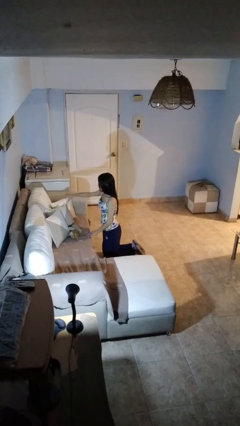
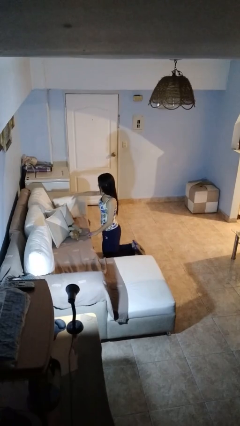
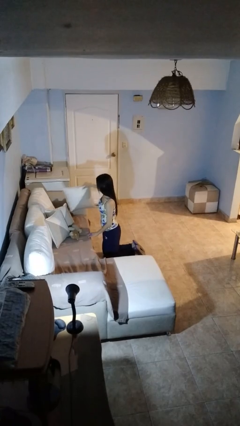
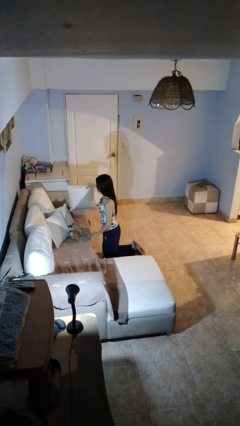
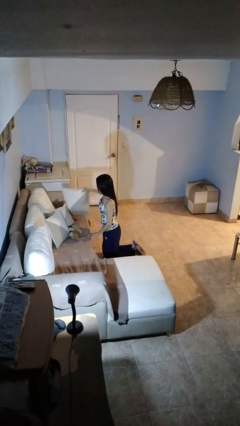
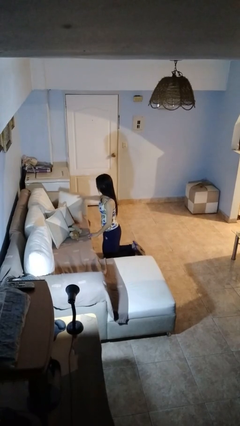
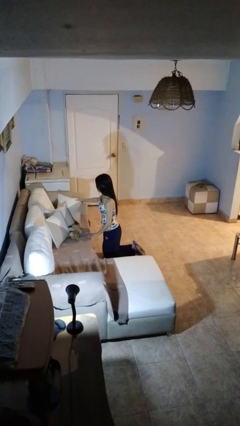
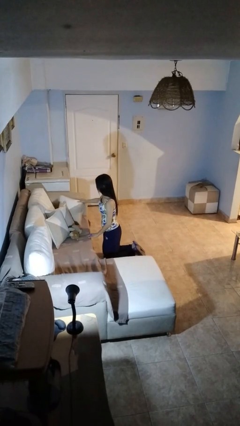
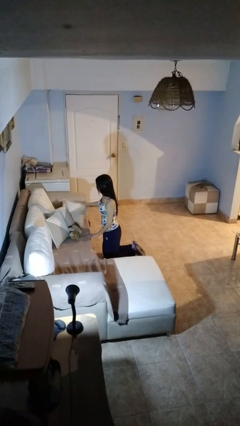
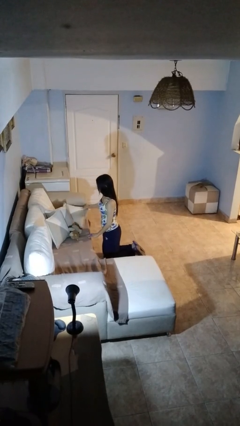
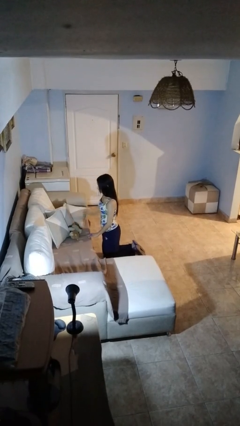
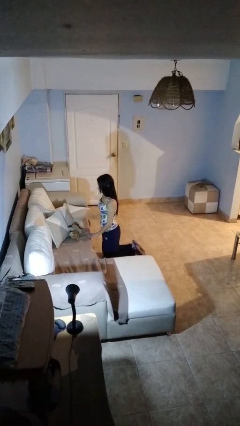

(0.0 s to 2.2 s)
person searches in couch

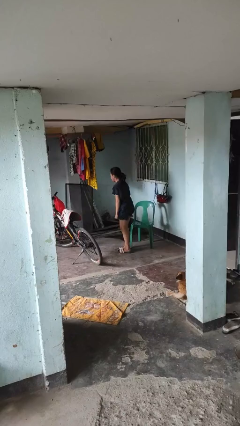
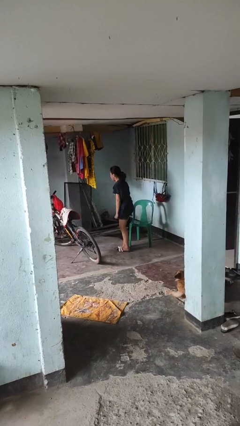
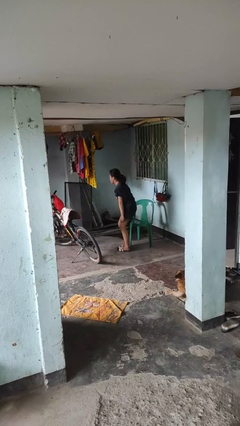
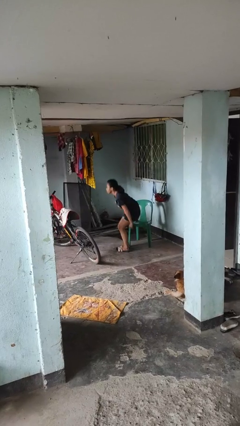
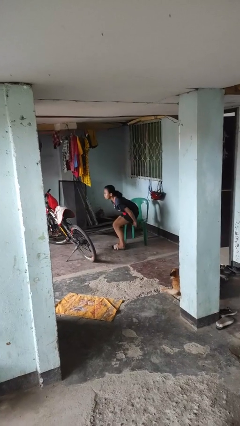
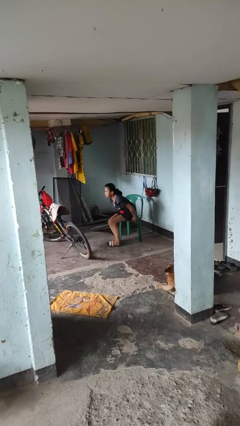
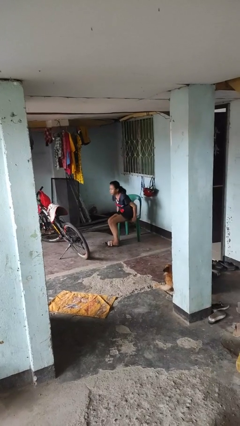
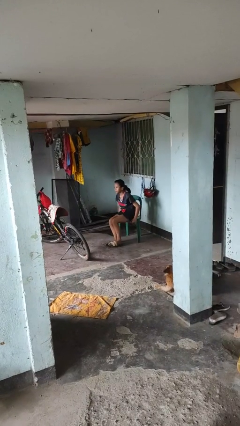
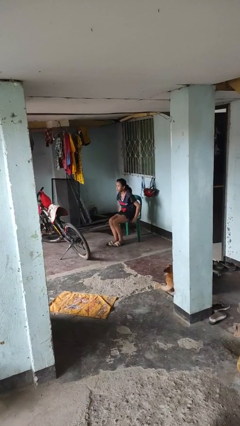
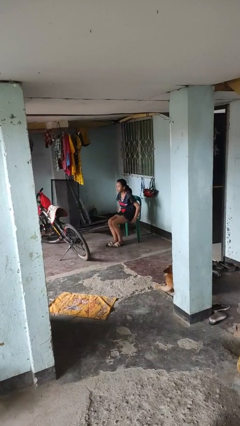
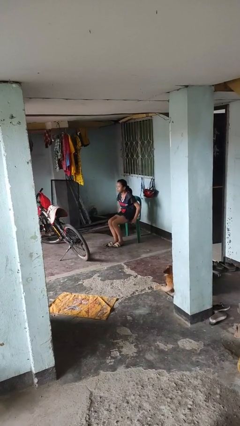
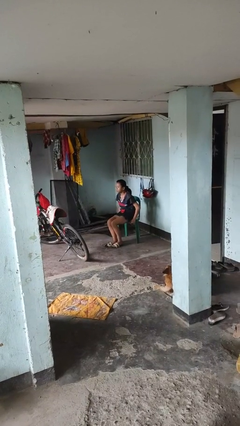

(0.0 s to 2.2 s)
person sits down

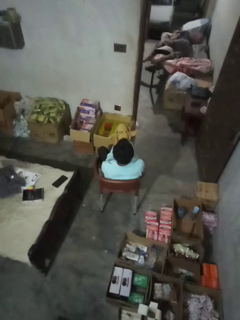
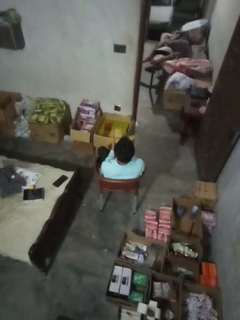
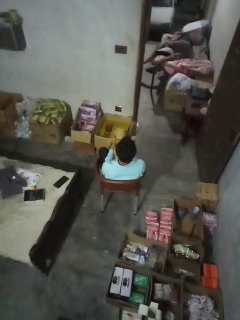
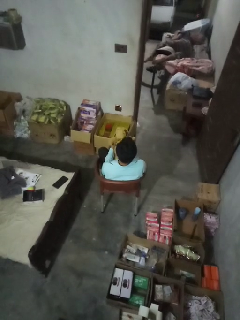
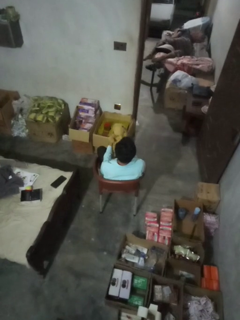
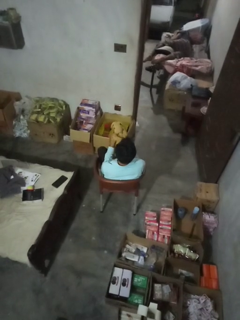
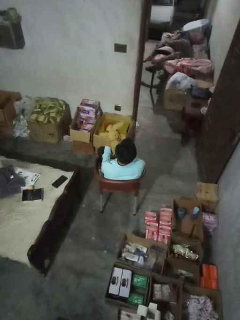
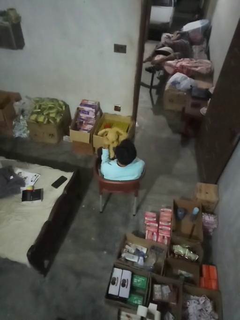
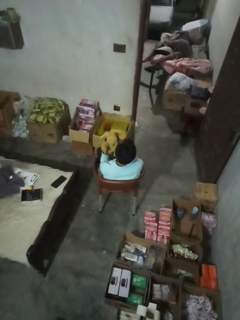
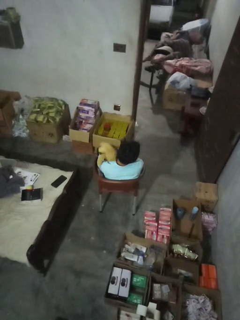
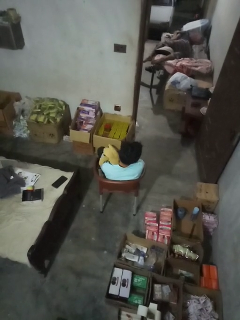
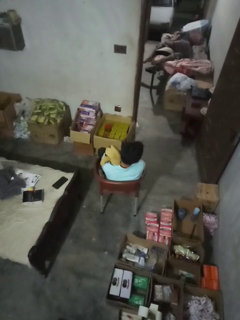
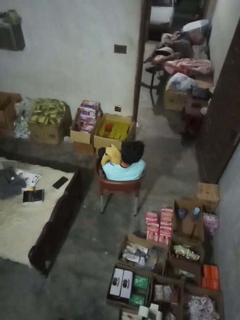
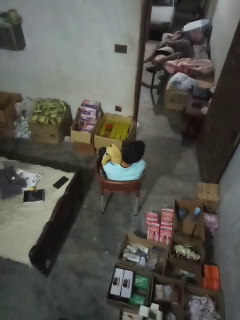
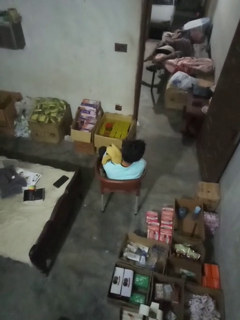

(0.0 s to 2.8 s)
person hugs stuffed animal

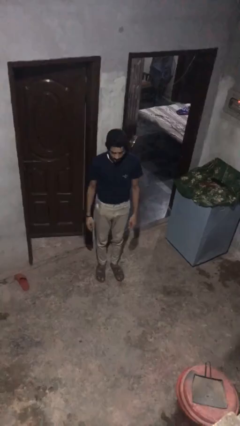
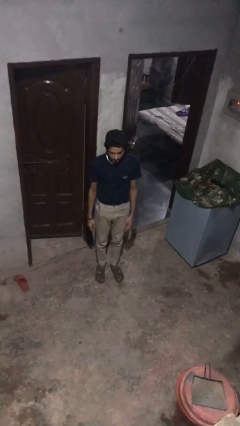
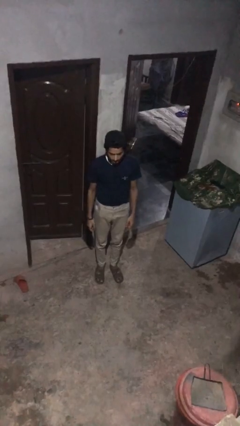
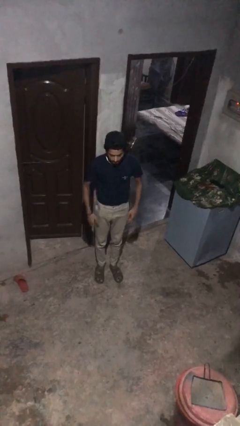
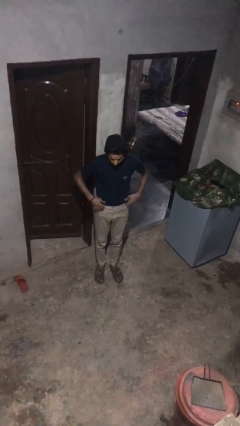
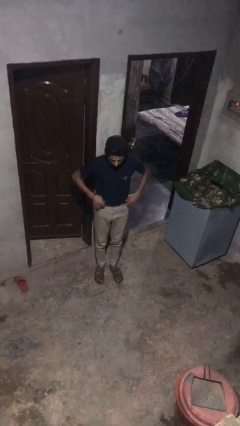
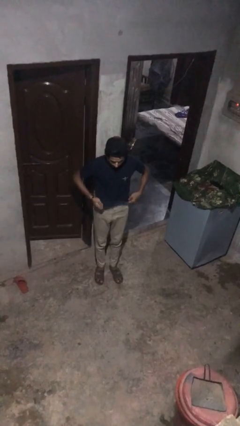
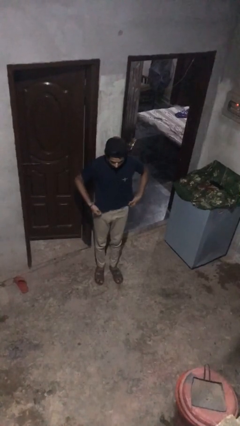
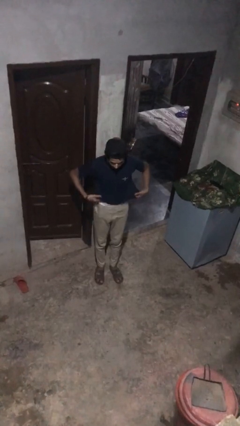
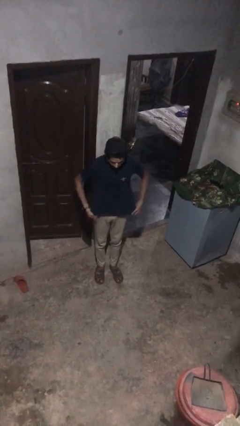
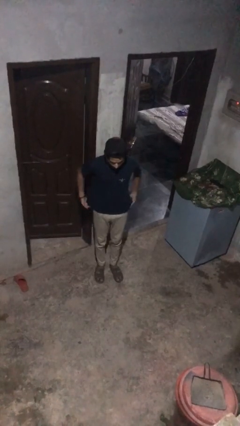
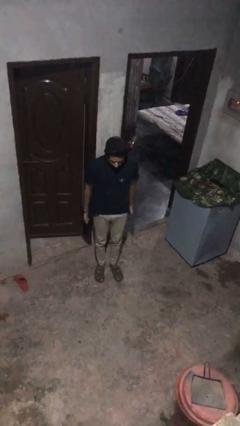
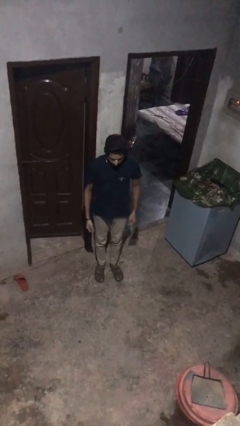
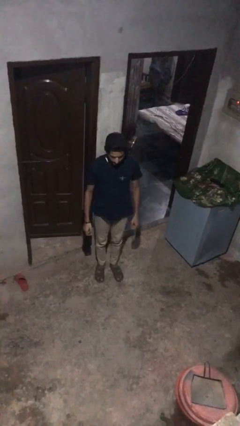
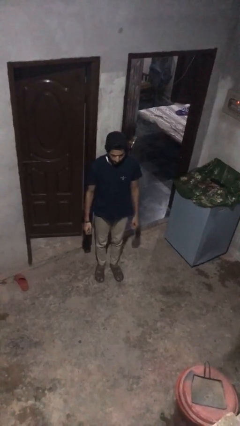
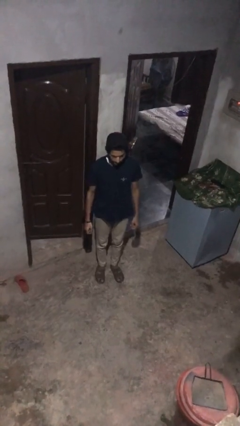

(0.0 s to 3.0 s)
person untucks shirt

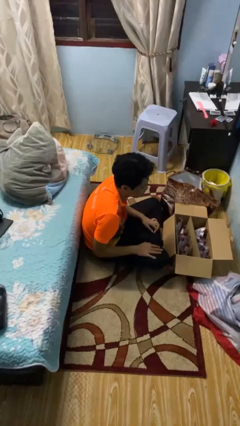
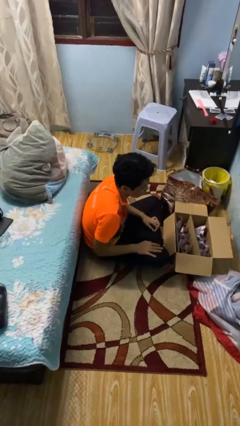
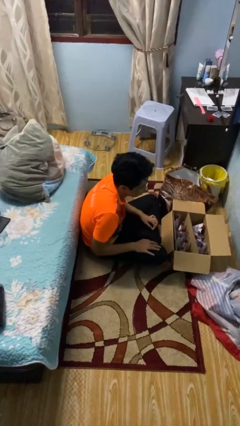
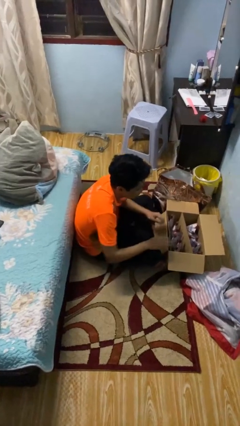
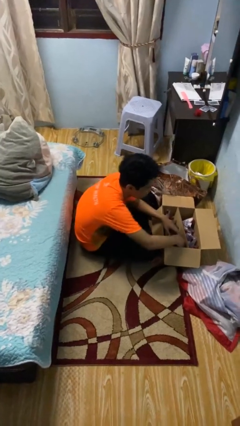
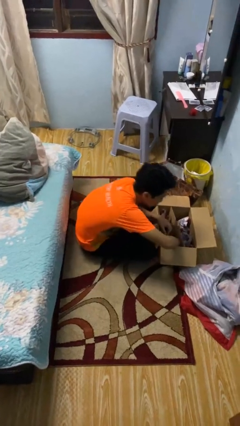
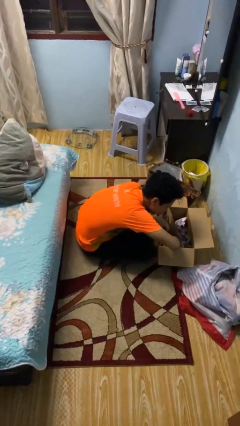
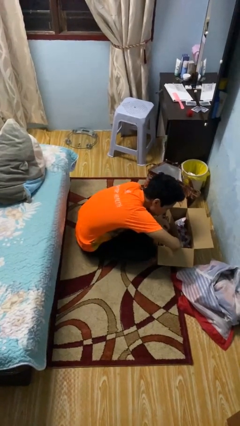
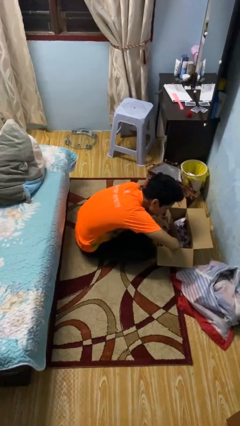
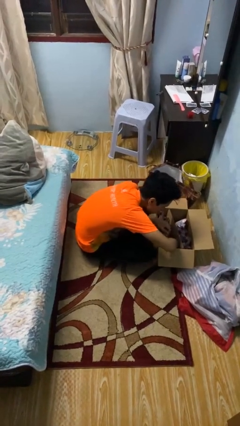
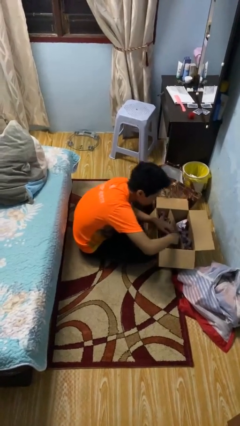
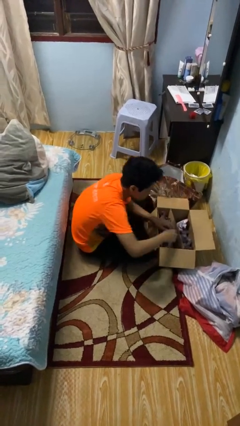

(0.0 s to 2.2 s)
person searches in bag

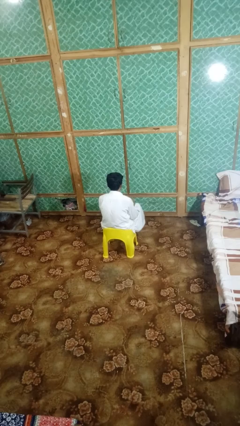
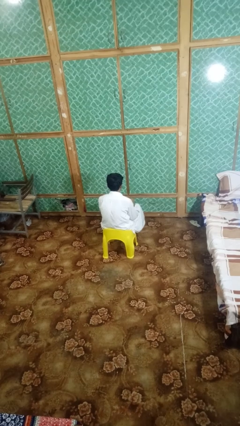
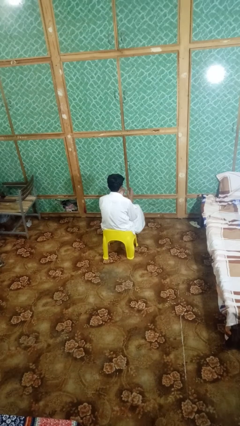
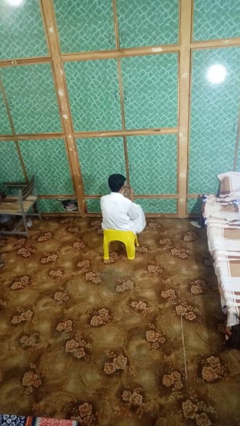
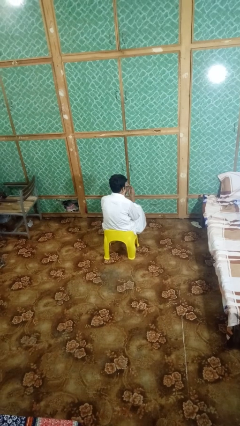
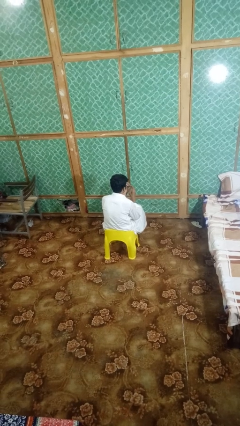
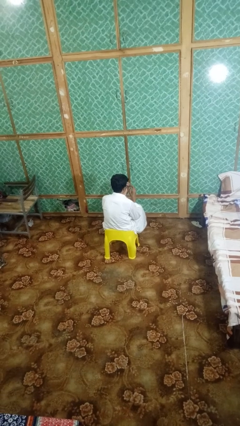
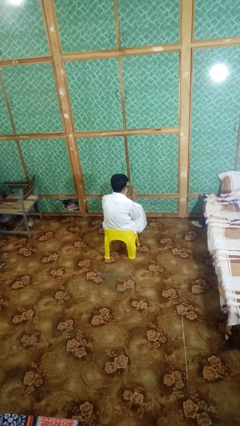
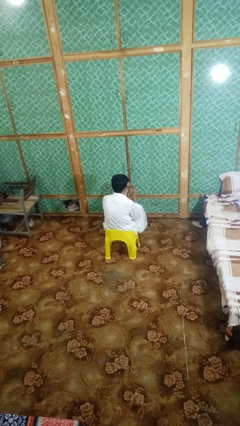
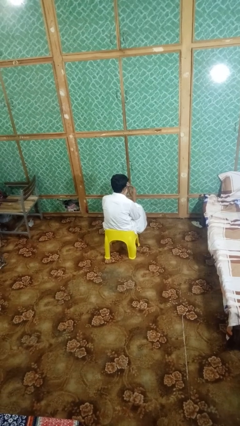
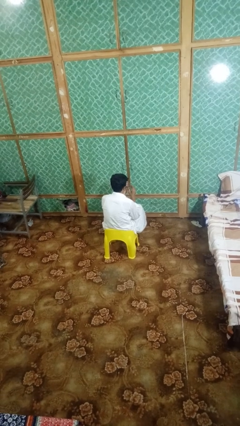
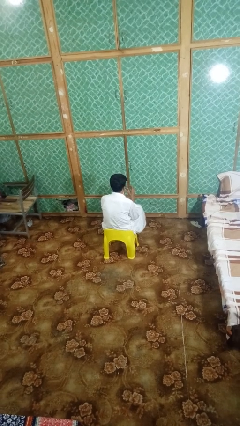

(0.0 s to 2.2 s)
person clips fingernails

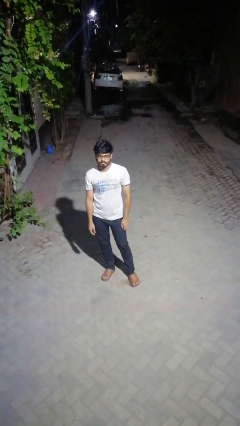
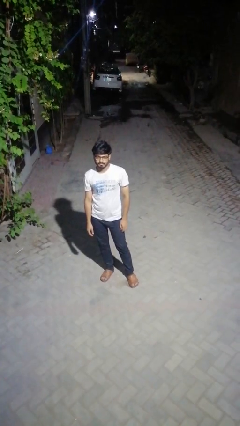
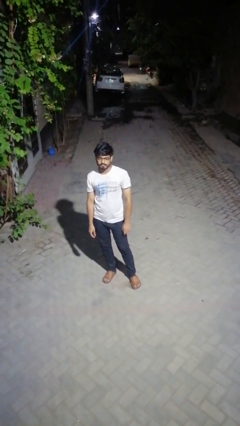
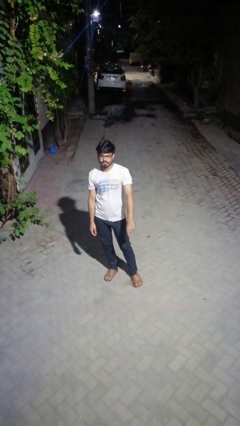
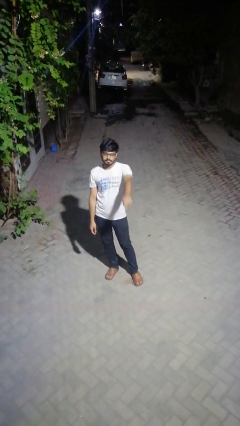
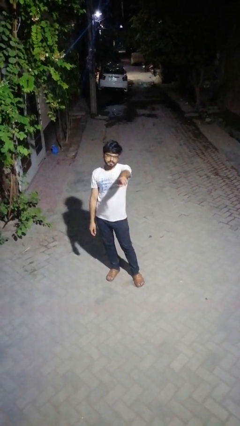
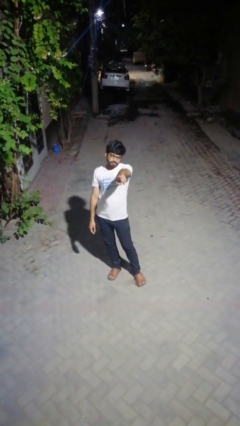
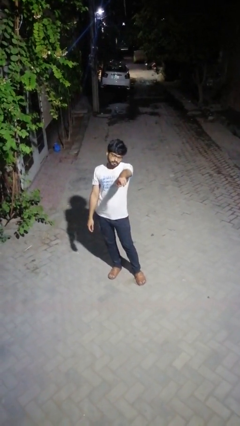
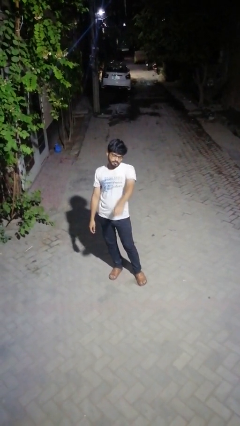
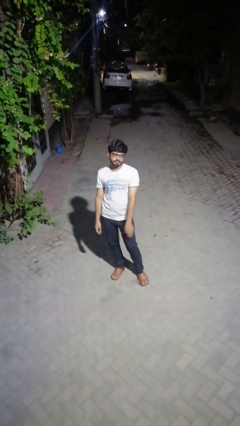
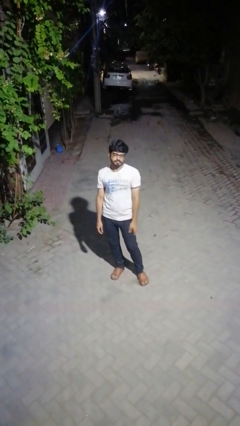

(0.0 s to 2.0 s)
person points at person

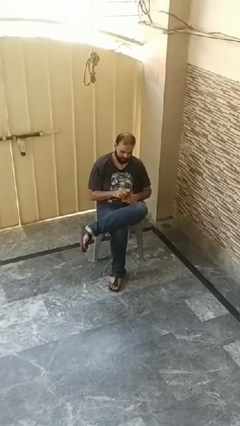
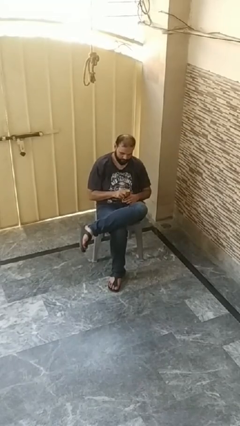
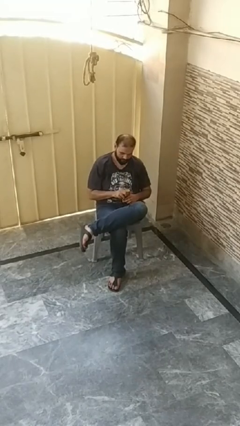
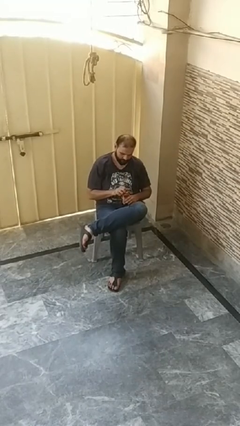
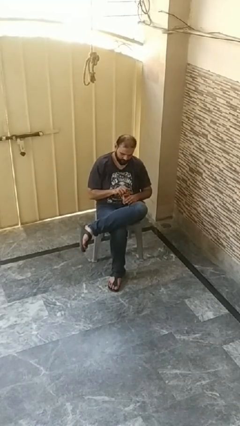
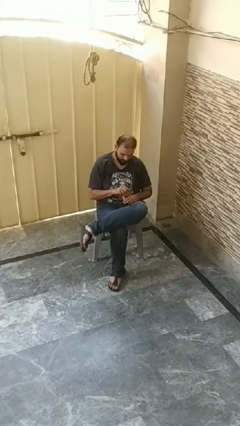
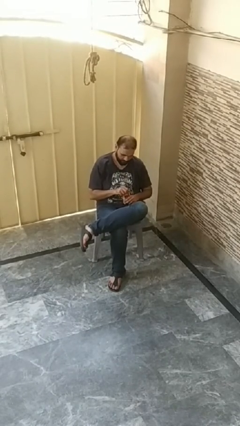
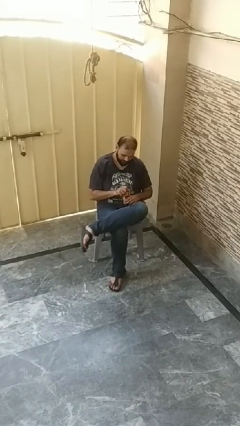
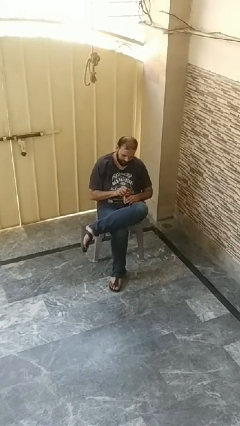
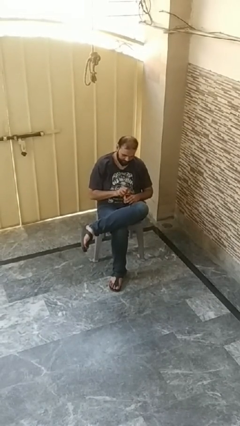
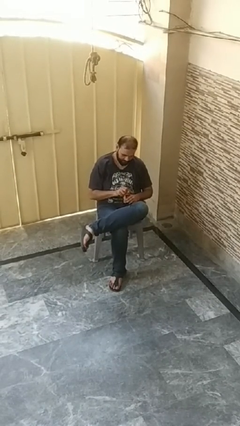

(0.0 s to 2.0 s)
person opens beverage can
